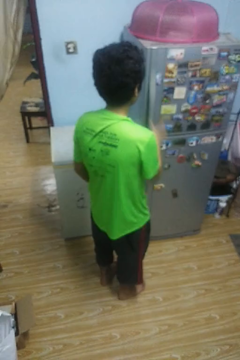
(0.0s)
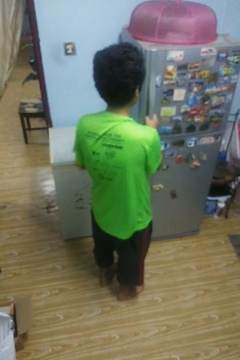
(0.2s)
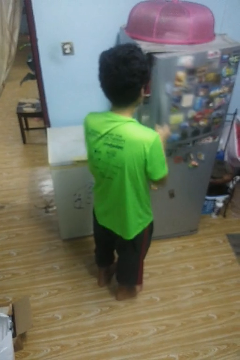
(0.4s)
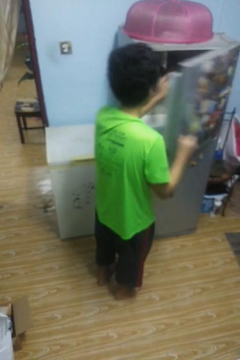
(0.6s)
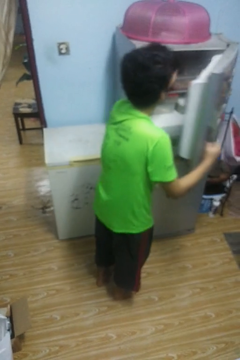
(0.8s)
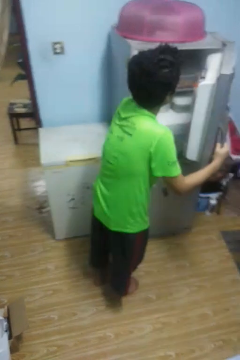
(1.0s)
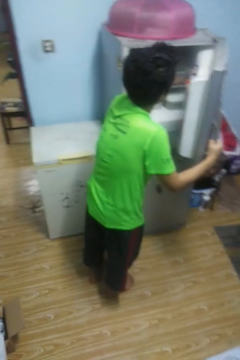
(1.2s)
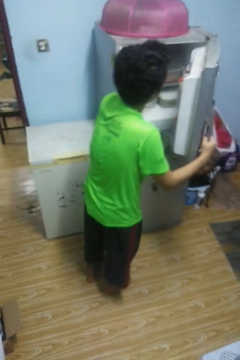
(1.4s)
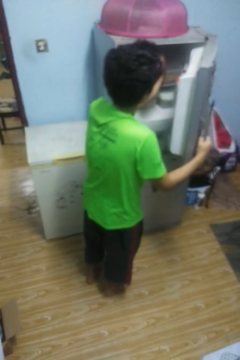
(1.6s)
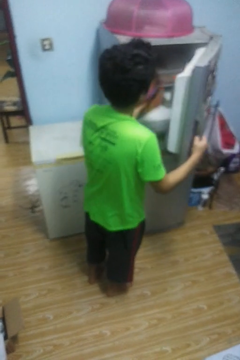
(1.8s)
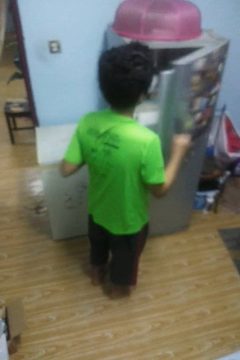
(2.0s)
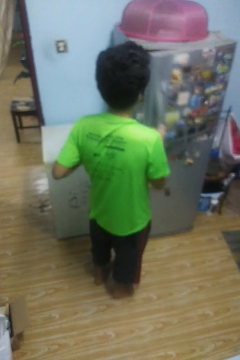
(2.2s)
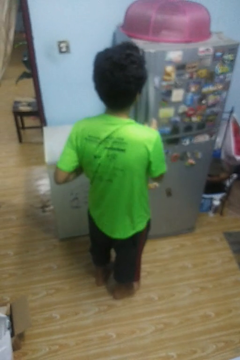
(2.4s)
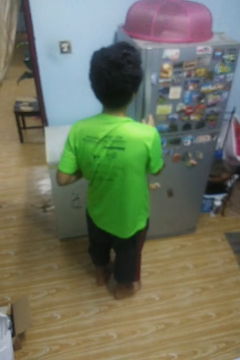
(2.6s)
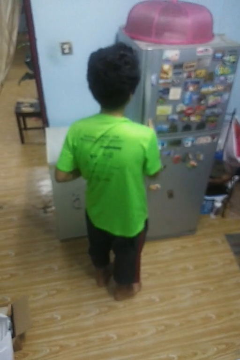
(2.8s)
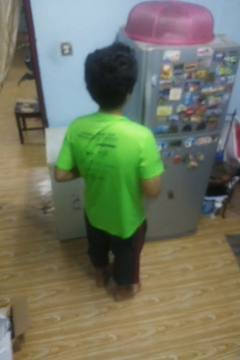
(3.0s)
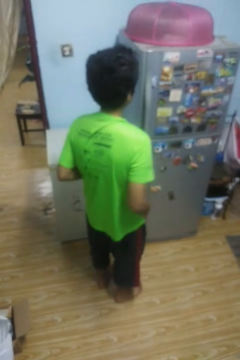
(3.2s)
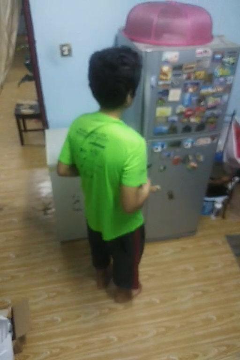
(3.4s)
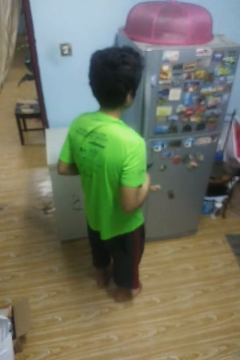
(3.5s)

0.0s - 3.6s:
person takes object from refrigerator

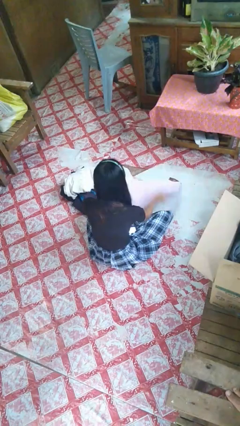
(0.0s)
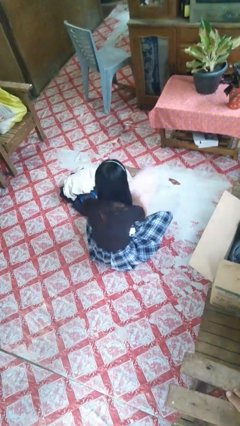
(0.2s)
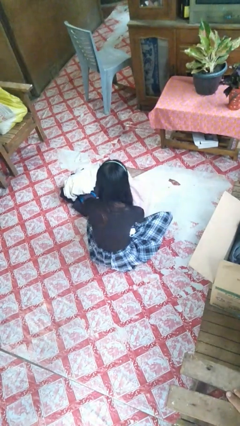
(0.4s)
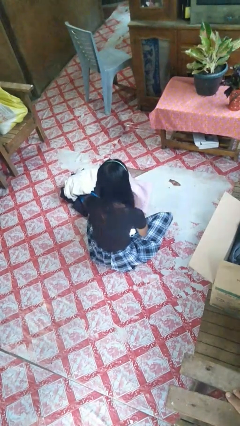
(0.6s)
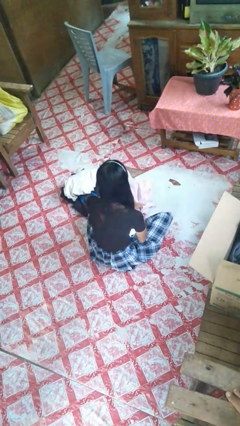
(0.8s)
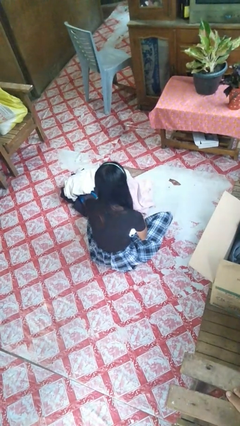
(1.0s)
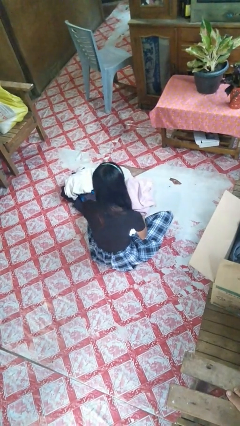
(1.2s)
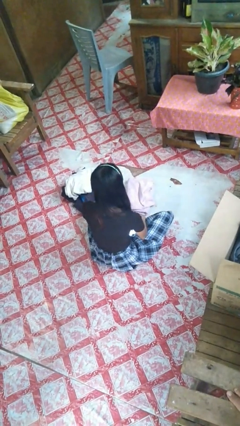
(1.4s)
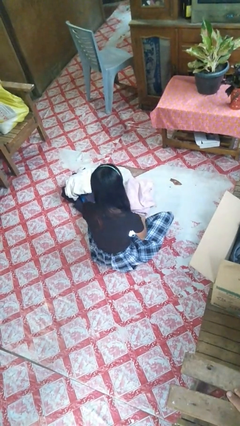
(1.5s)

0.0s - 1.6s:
person folds towel

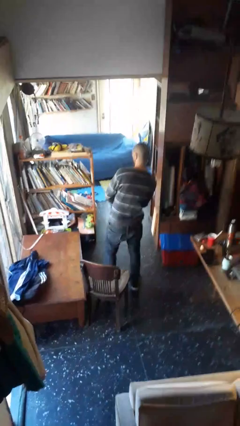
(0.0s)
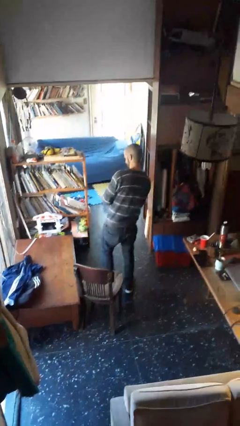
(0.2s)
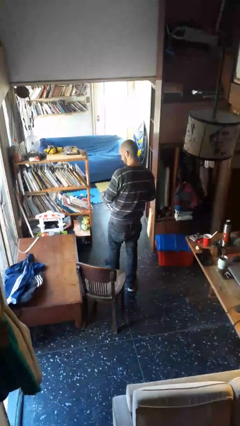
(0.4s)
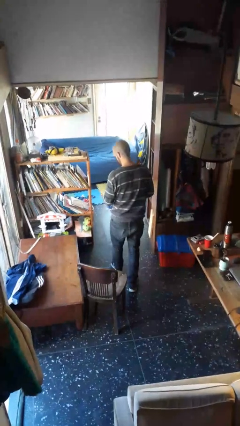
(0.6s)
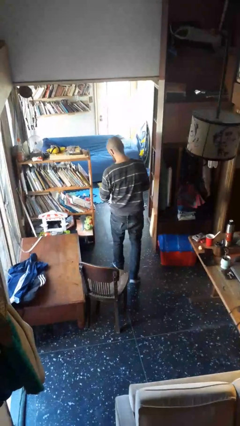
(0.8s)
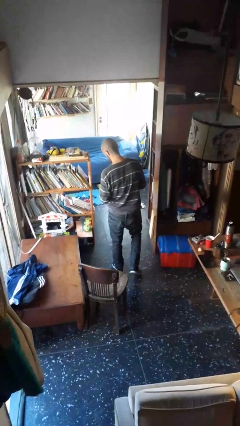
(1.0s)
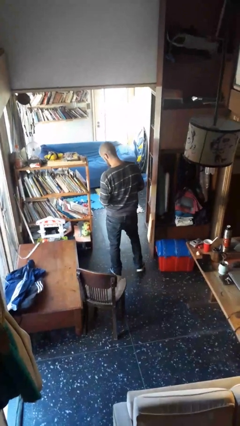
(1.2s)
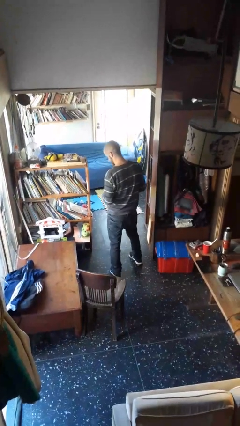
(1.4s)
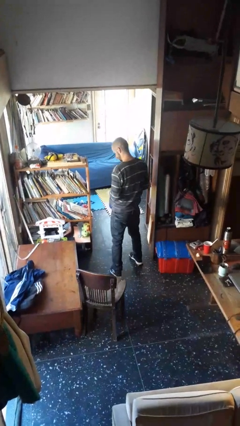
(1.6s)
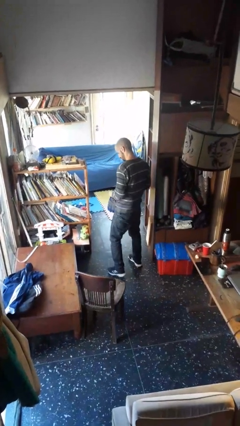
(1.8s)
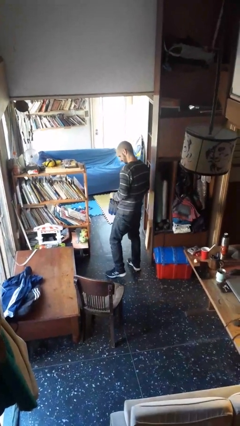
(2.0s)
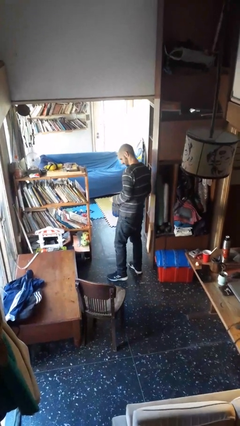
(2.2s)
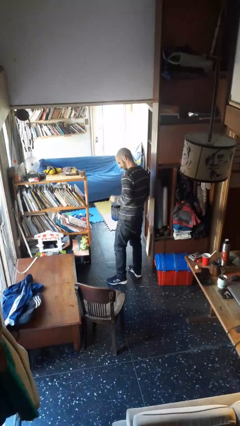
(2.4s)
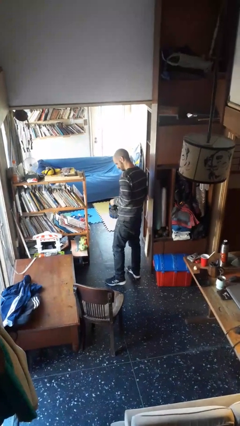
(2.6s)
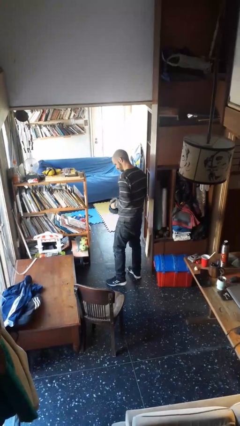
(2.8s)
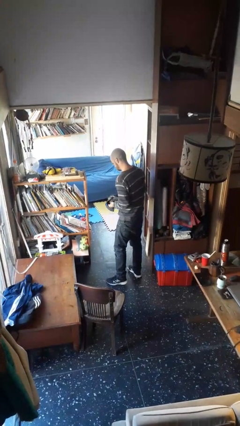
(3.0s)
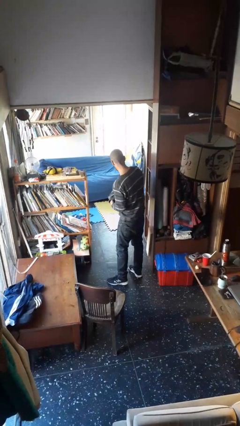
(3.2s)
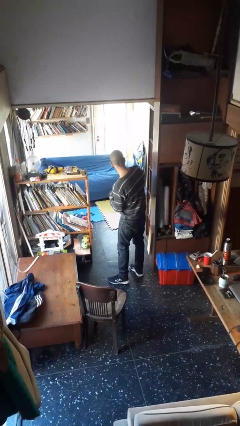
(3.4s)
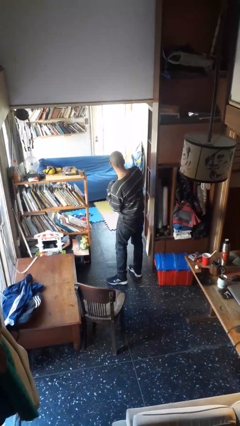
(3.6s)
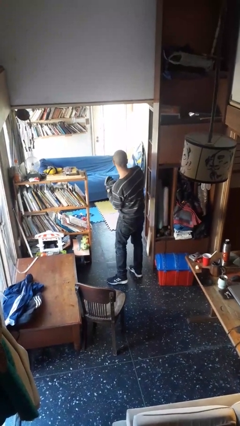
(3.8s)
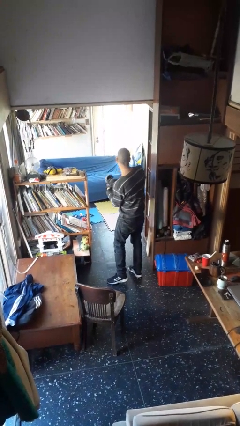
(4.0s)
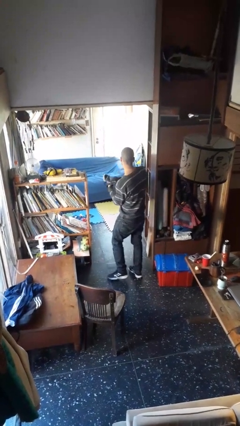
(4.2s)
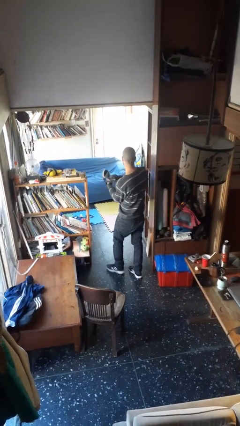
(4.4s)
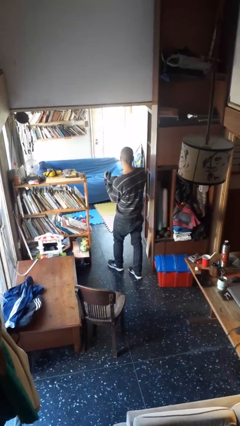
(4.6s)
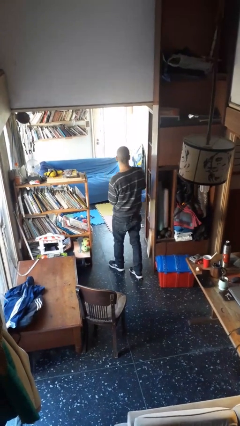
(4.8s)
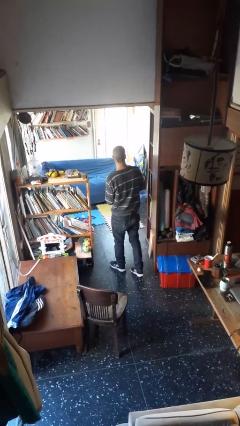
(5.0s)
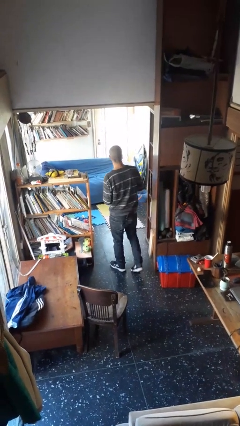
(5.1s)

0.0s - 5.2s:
person puts on gloves

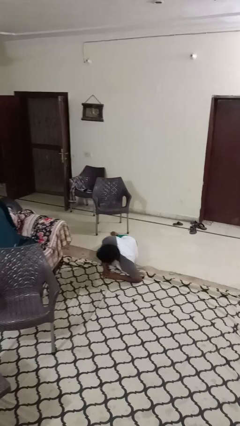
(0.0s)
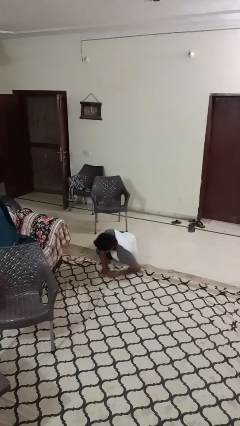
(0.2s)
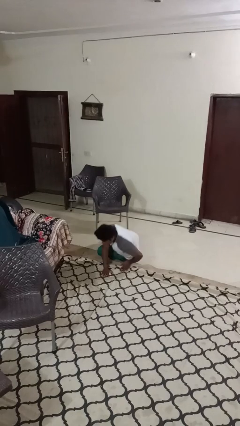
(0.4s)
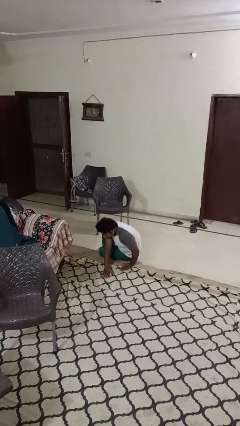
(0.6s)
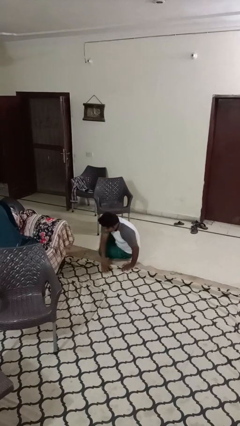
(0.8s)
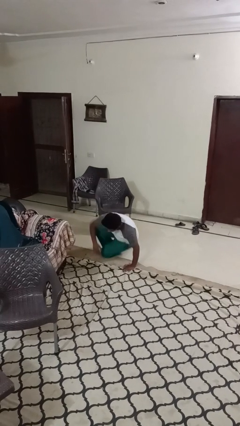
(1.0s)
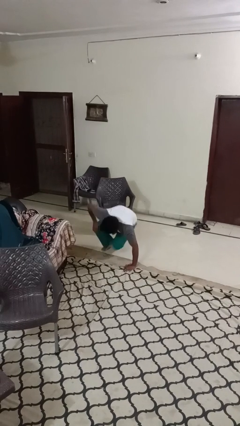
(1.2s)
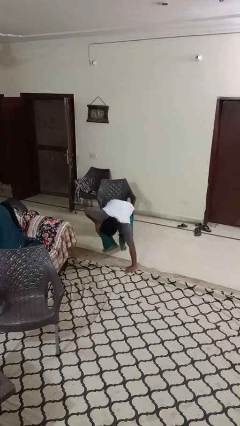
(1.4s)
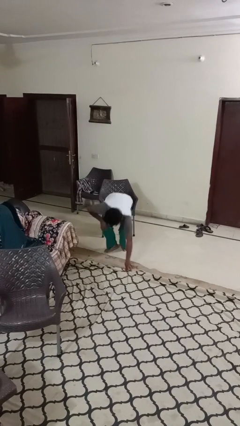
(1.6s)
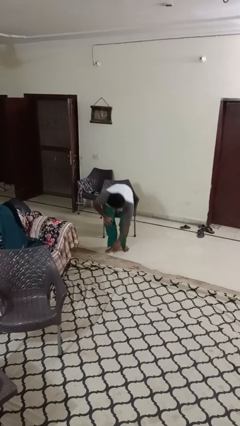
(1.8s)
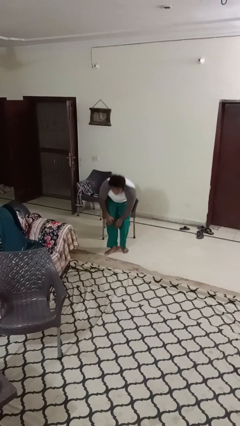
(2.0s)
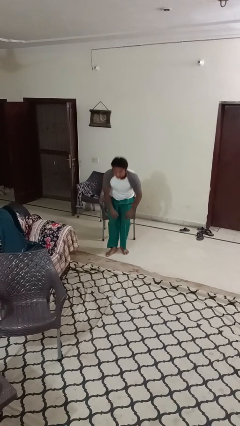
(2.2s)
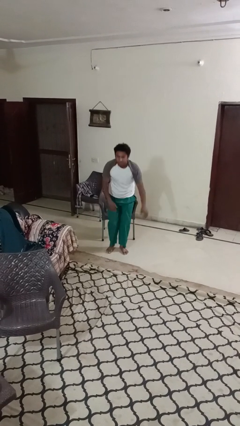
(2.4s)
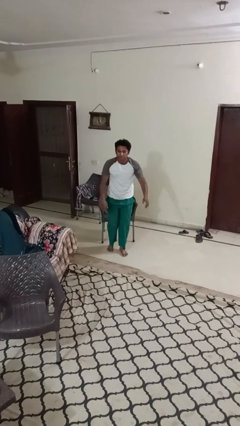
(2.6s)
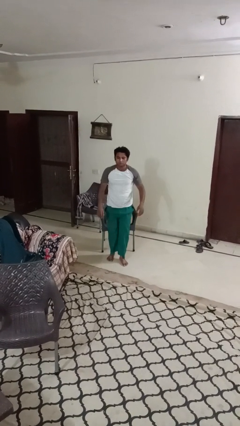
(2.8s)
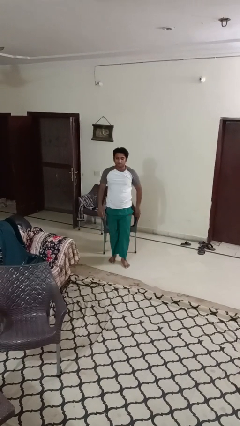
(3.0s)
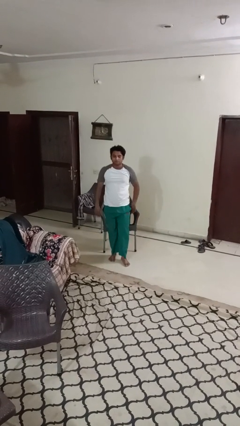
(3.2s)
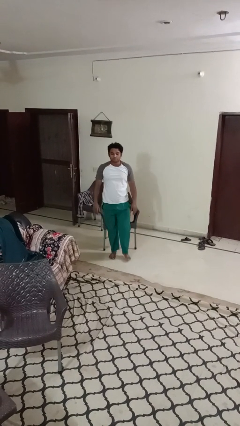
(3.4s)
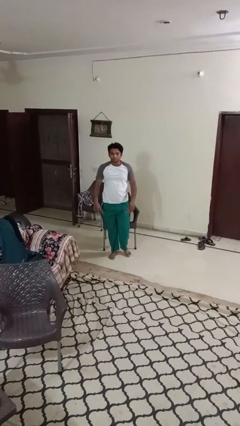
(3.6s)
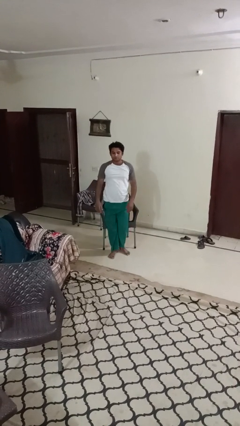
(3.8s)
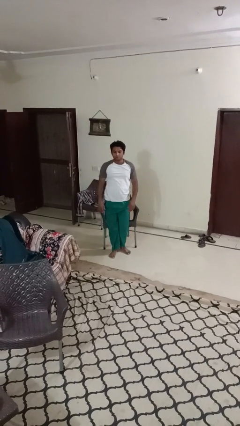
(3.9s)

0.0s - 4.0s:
person stands up from floor

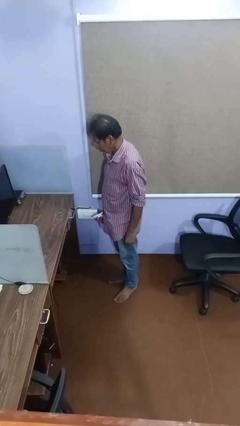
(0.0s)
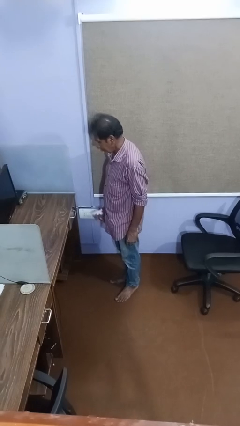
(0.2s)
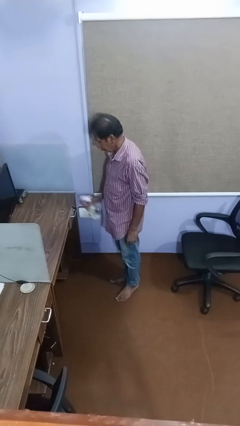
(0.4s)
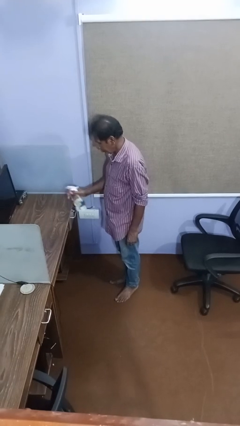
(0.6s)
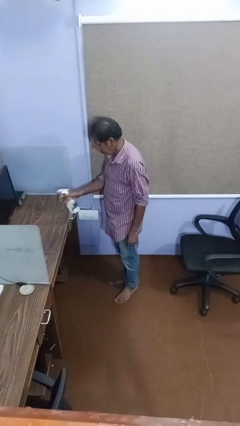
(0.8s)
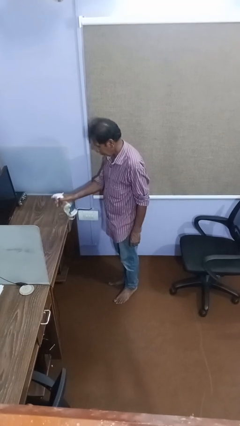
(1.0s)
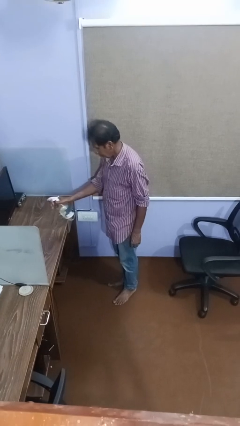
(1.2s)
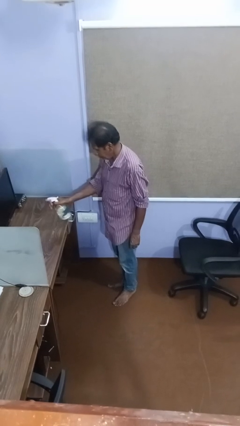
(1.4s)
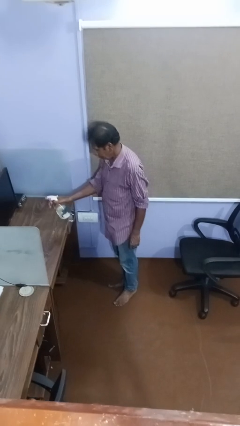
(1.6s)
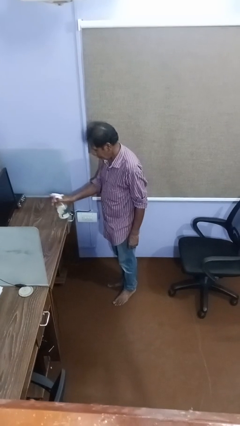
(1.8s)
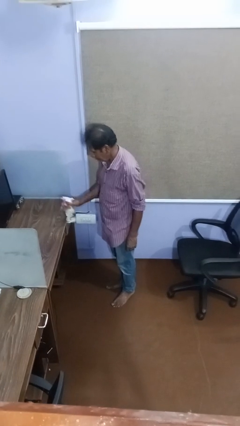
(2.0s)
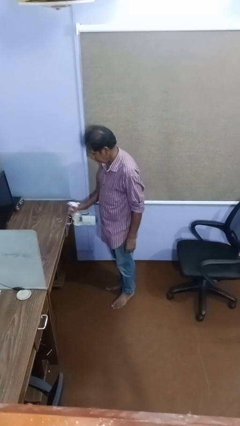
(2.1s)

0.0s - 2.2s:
person sprays from bottle

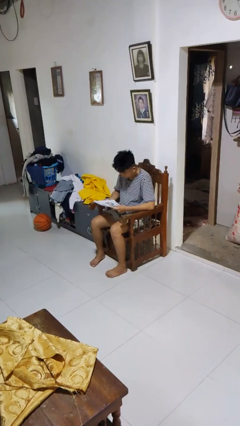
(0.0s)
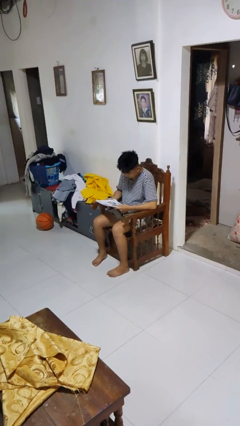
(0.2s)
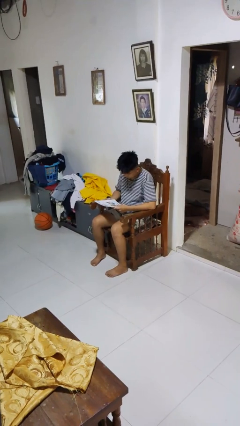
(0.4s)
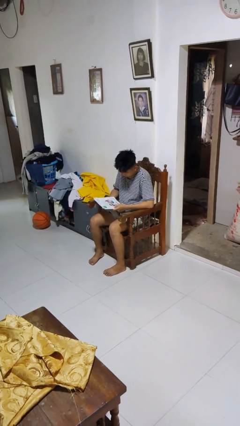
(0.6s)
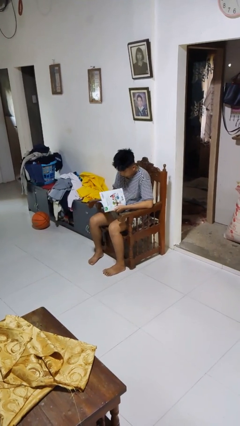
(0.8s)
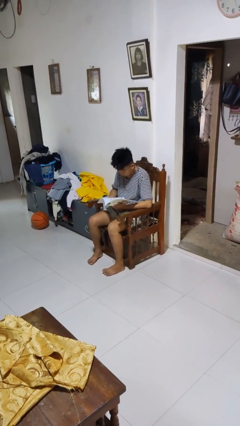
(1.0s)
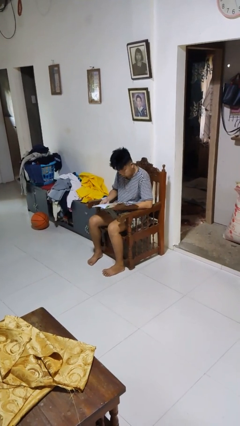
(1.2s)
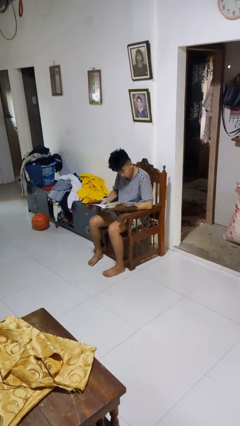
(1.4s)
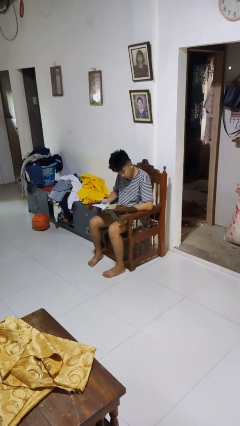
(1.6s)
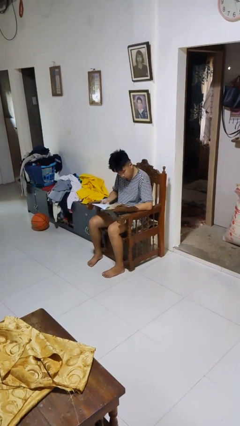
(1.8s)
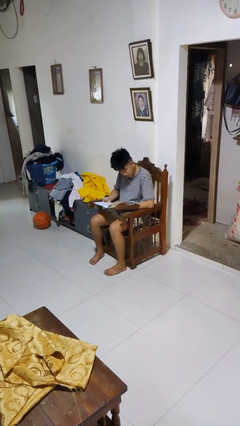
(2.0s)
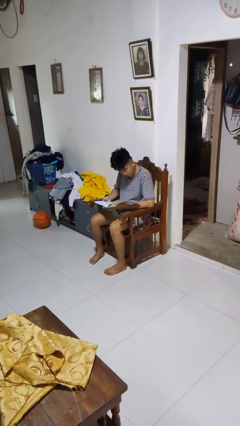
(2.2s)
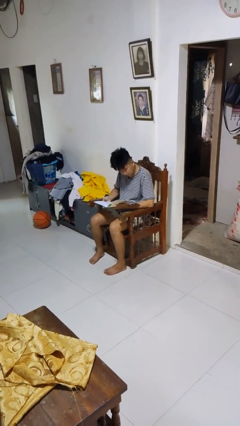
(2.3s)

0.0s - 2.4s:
person reads magazine
